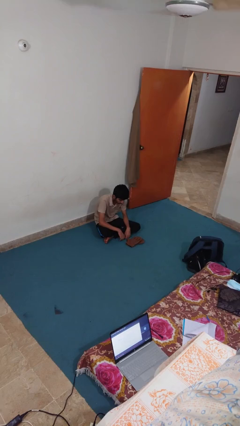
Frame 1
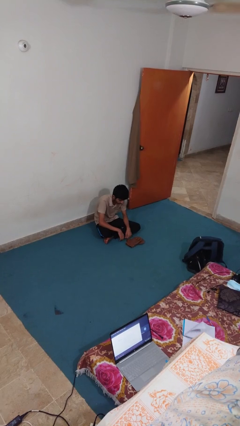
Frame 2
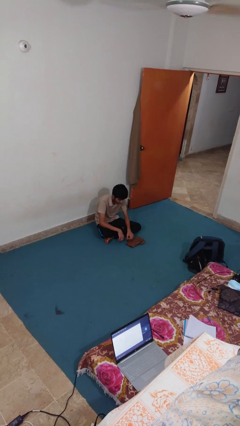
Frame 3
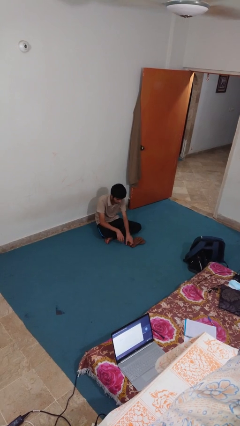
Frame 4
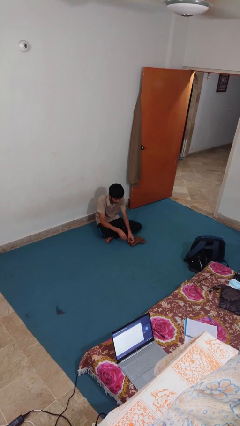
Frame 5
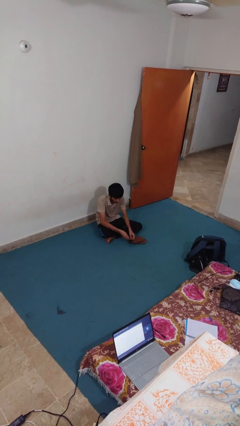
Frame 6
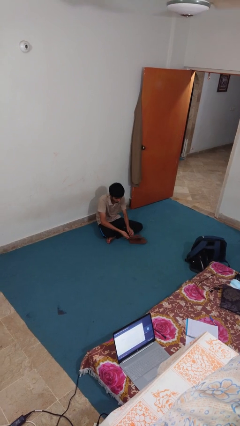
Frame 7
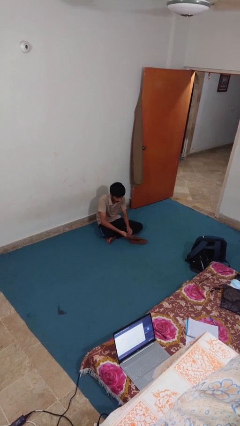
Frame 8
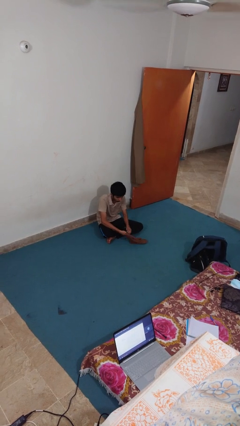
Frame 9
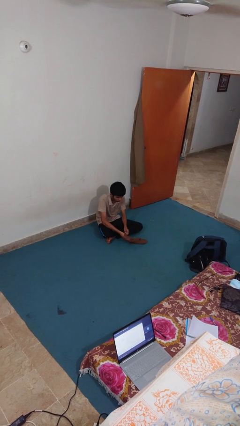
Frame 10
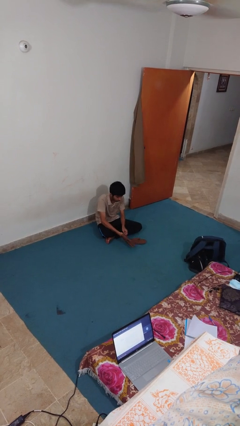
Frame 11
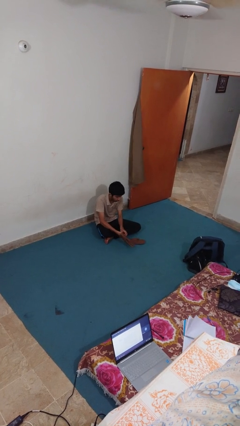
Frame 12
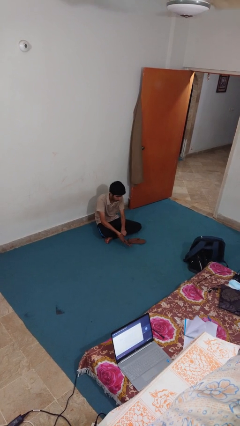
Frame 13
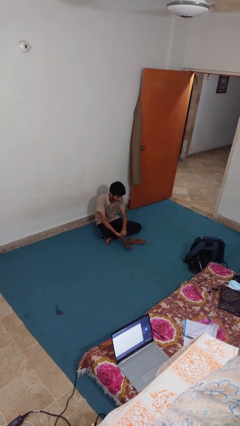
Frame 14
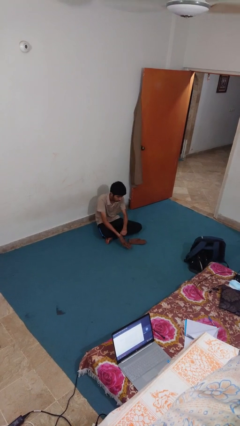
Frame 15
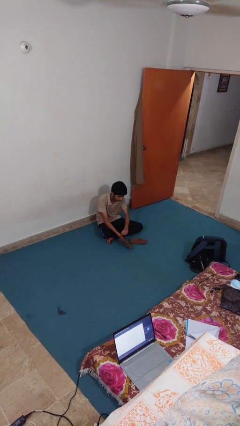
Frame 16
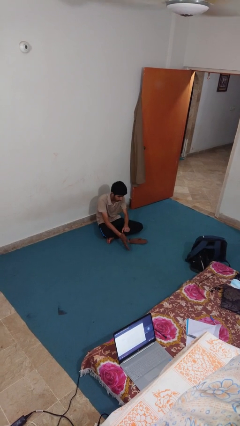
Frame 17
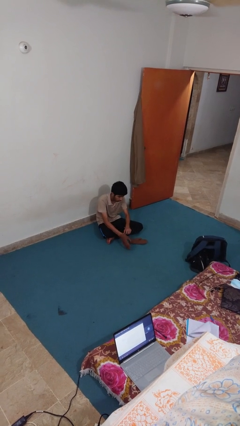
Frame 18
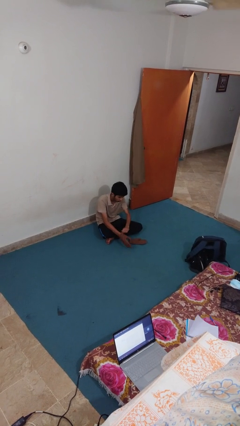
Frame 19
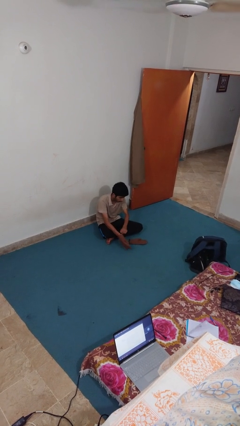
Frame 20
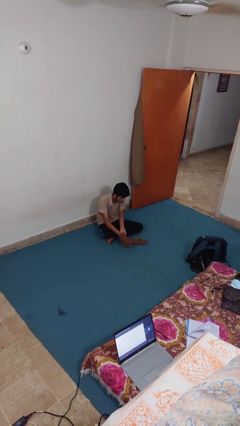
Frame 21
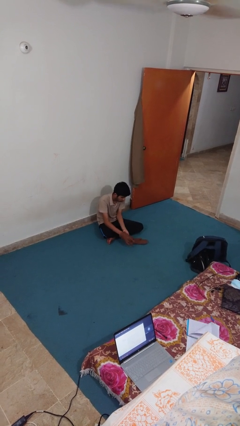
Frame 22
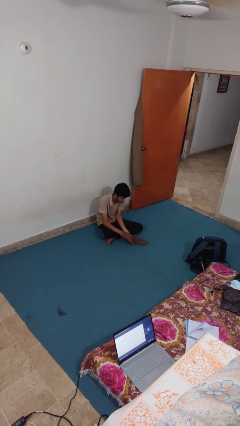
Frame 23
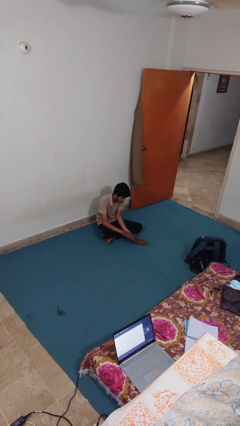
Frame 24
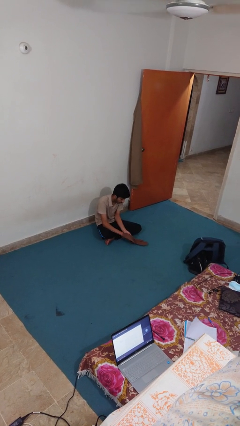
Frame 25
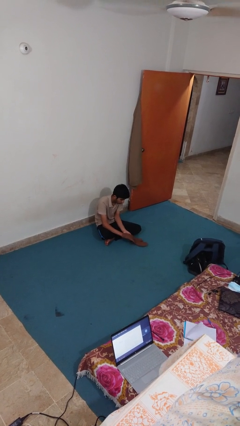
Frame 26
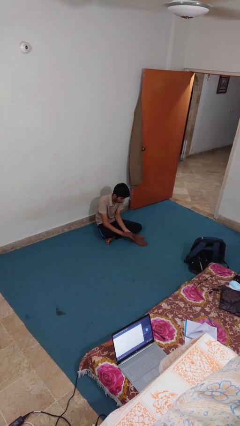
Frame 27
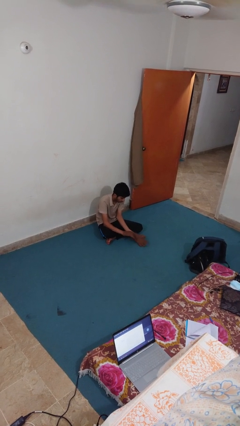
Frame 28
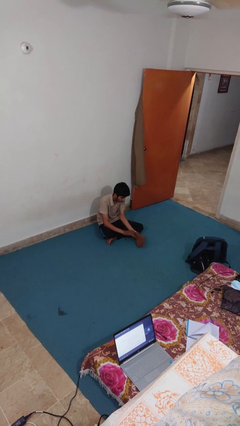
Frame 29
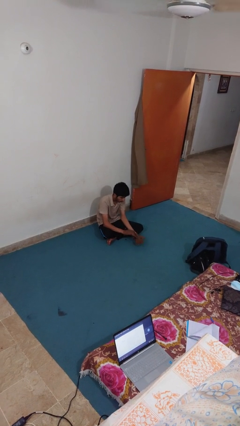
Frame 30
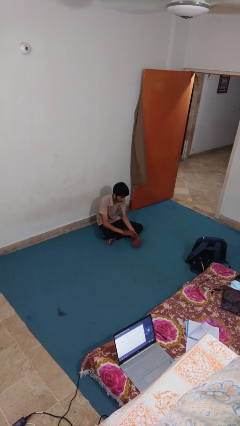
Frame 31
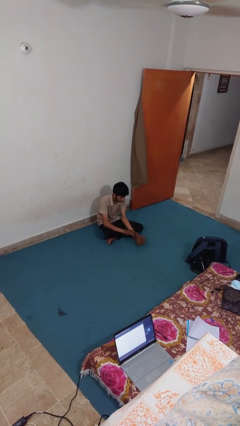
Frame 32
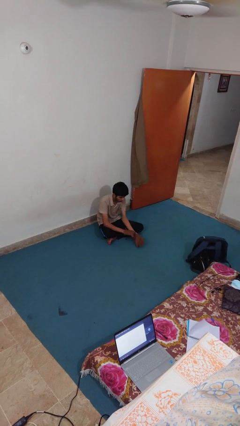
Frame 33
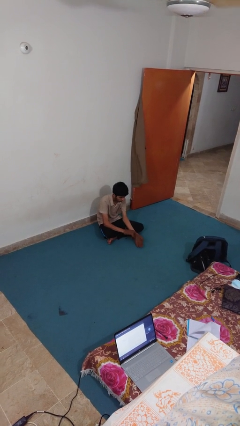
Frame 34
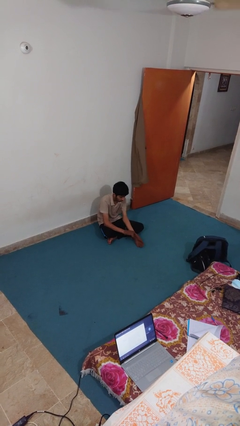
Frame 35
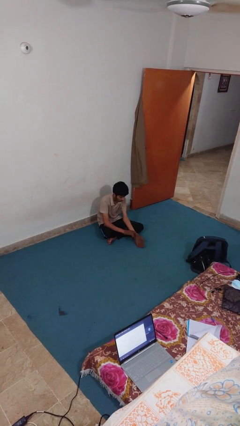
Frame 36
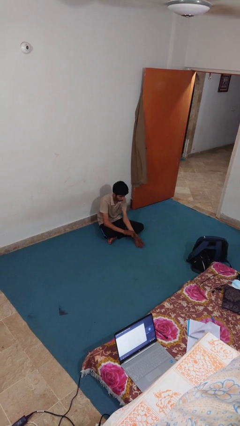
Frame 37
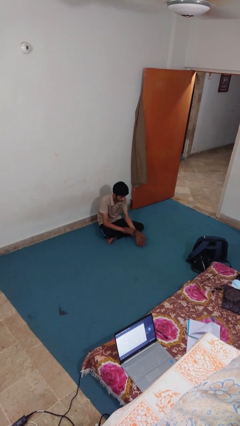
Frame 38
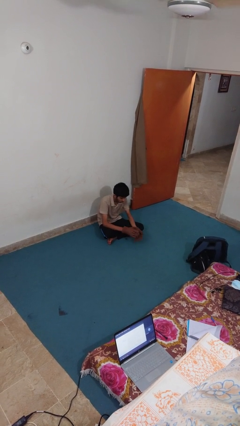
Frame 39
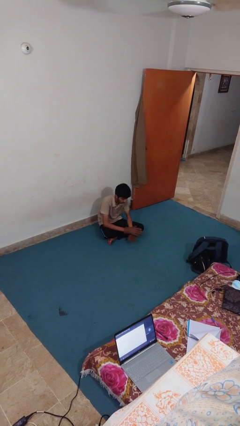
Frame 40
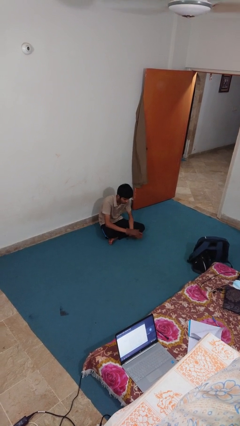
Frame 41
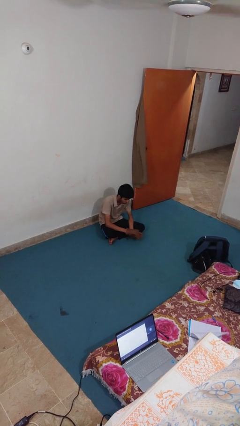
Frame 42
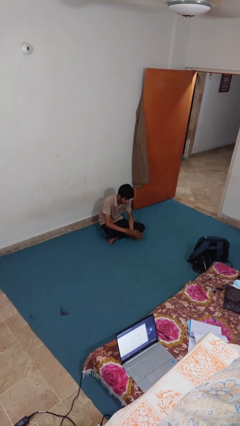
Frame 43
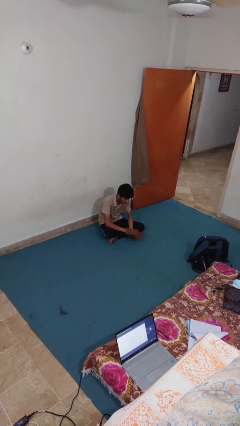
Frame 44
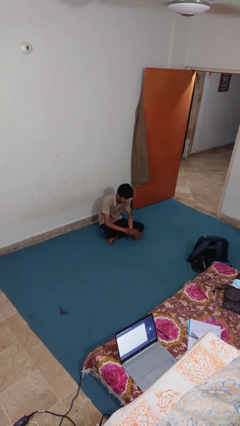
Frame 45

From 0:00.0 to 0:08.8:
person puts on gloves

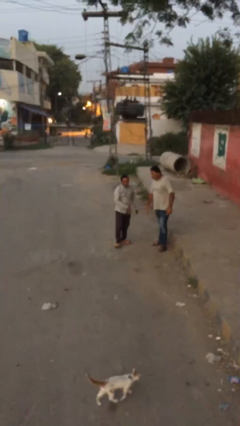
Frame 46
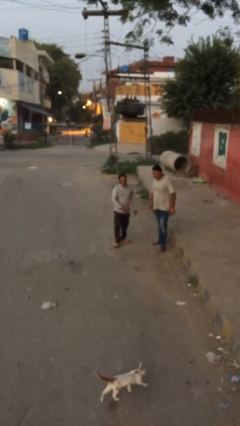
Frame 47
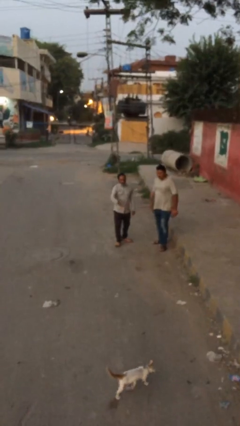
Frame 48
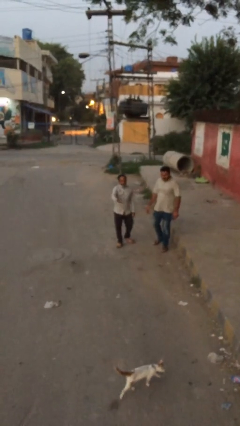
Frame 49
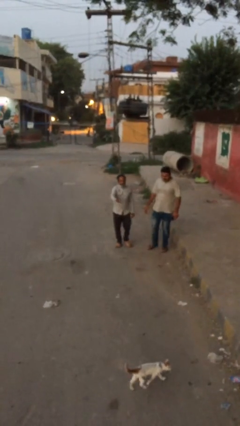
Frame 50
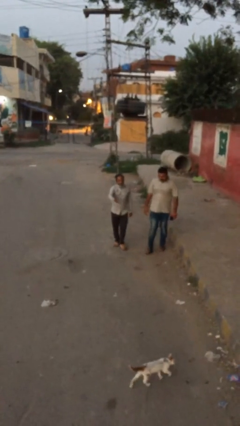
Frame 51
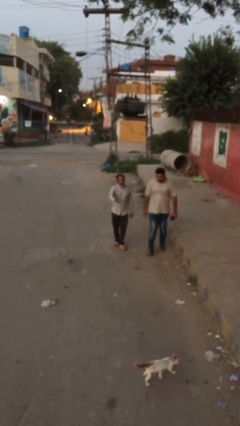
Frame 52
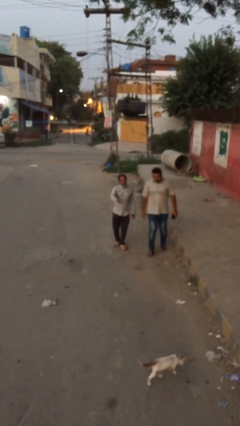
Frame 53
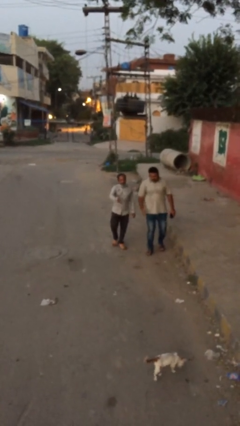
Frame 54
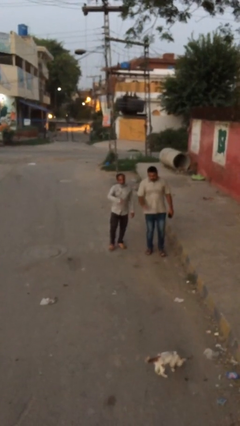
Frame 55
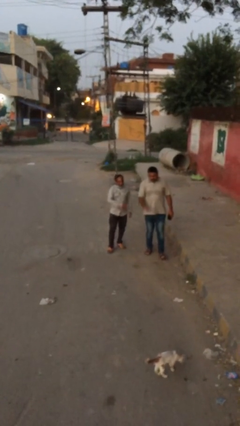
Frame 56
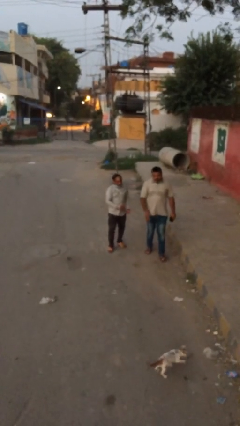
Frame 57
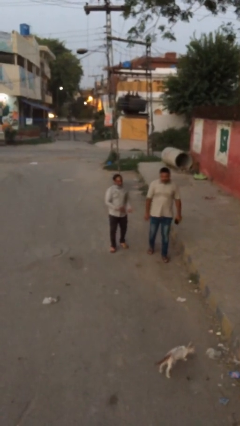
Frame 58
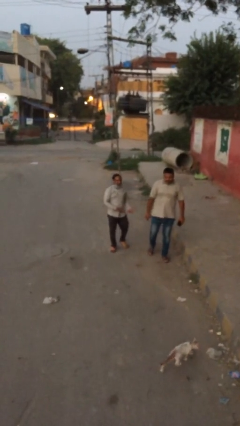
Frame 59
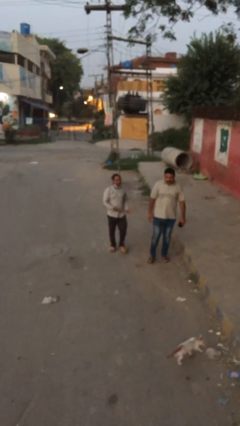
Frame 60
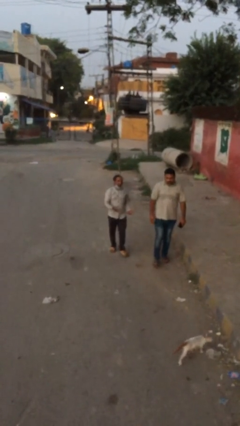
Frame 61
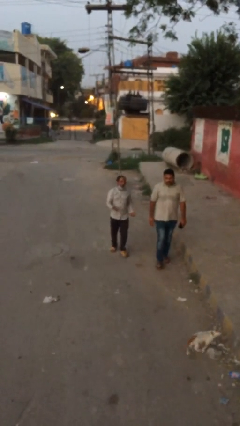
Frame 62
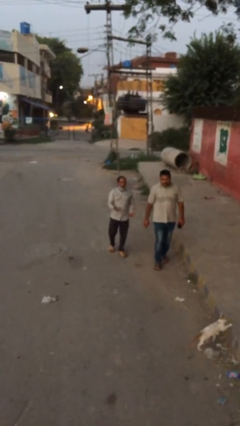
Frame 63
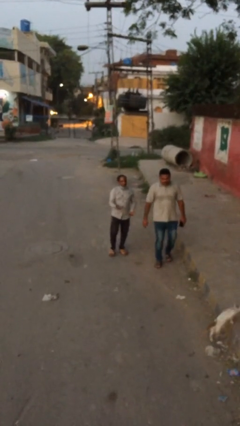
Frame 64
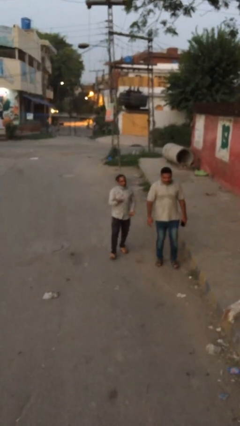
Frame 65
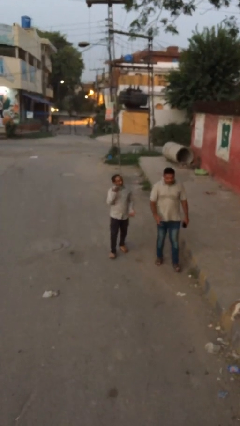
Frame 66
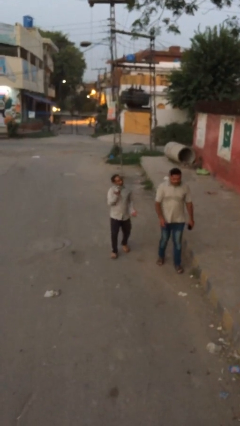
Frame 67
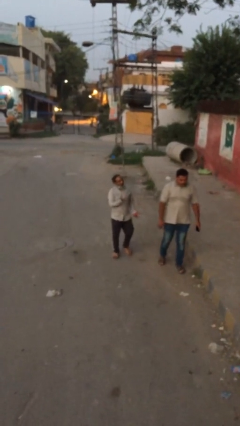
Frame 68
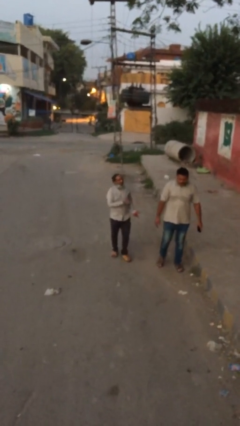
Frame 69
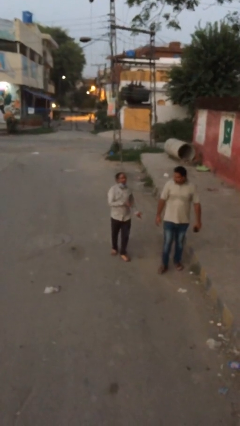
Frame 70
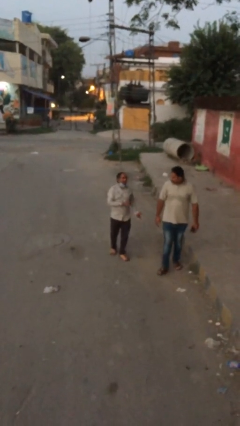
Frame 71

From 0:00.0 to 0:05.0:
person talks to person

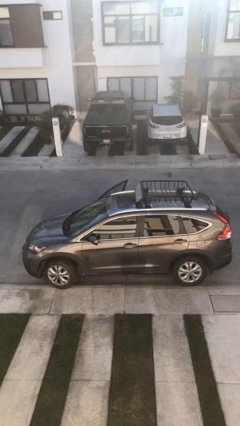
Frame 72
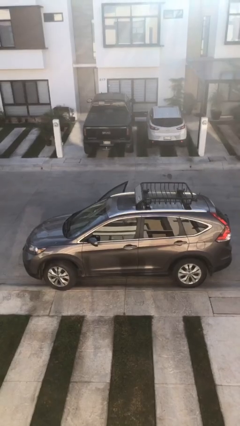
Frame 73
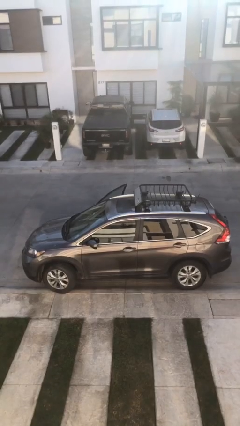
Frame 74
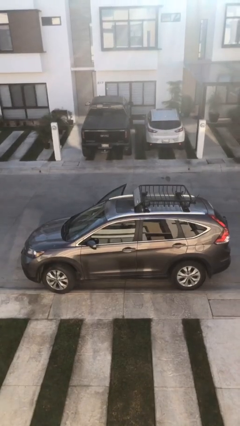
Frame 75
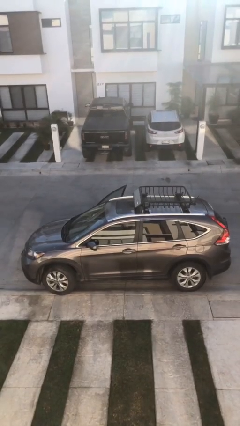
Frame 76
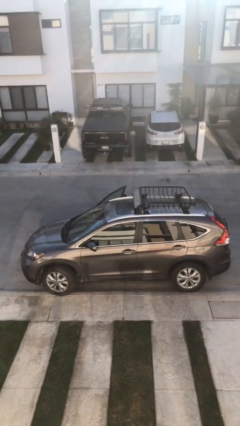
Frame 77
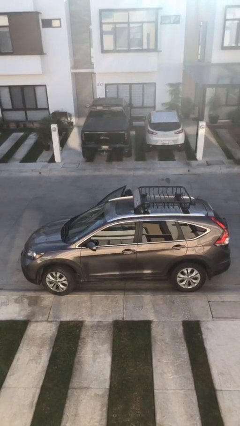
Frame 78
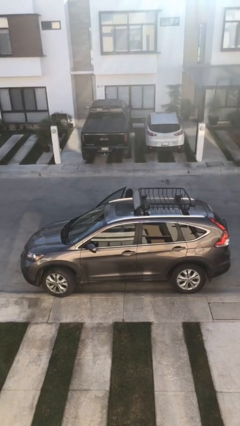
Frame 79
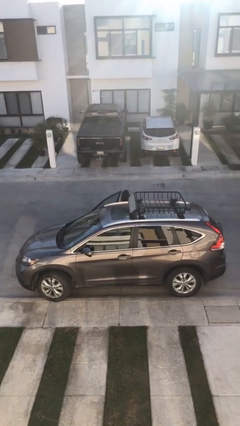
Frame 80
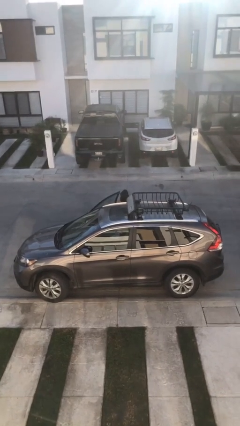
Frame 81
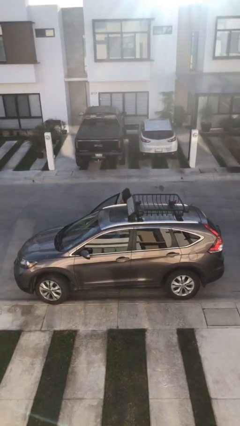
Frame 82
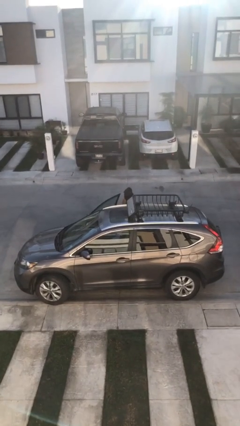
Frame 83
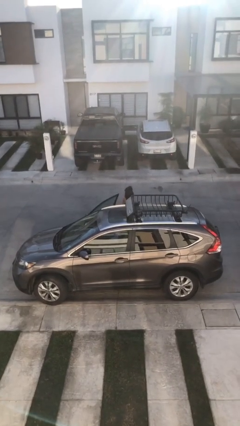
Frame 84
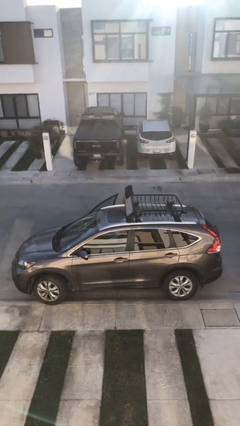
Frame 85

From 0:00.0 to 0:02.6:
person exits car

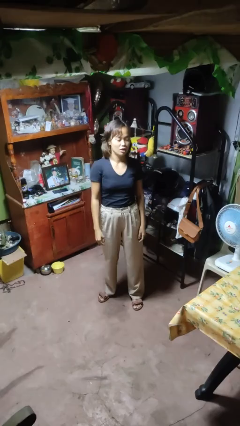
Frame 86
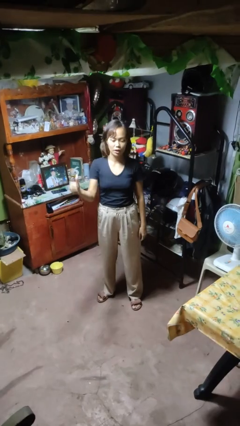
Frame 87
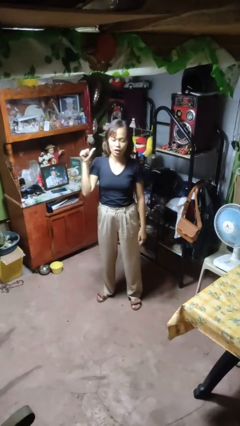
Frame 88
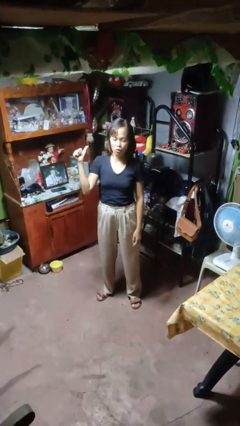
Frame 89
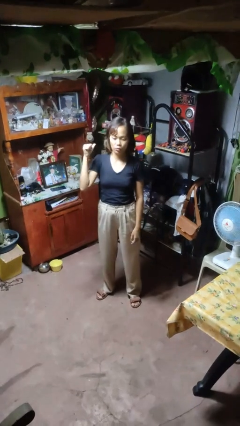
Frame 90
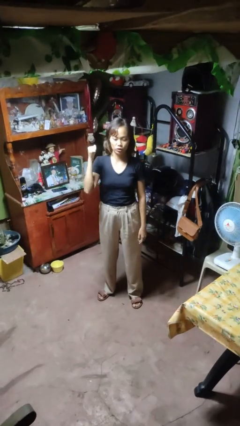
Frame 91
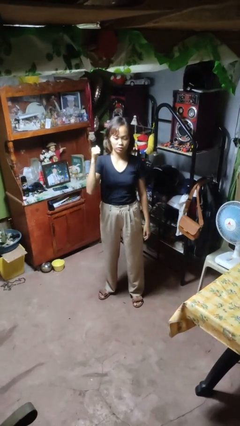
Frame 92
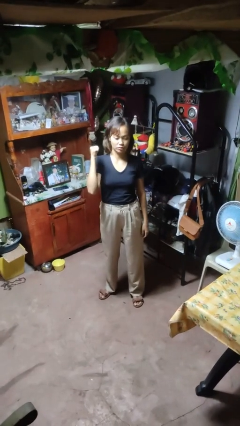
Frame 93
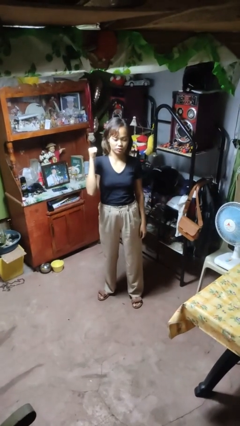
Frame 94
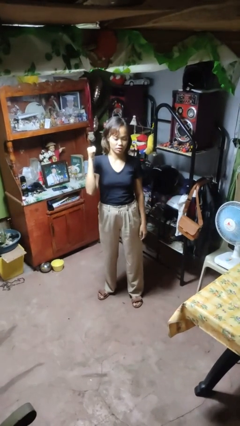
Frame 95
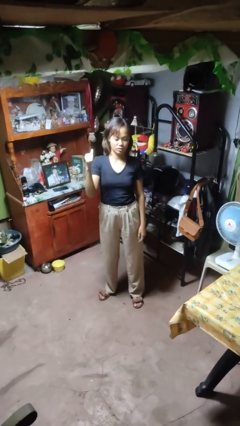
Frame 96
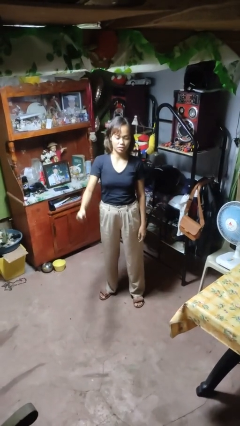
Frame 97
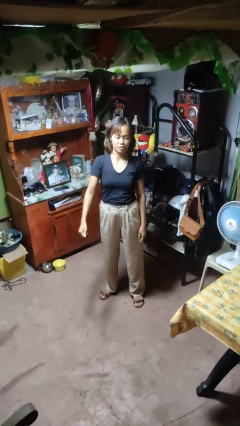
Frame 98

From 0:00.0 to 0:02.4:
person gestures behind me
